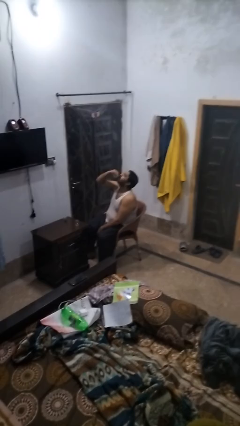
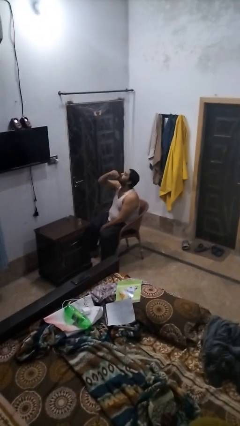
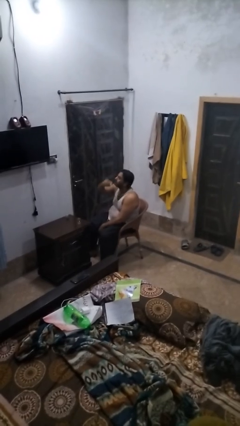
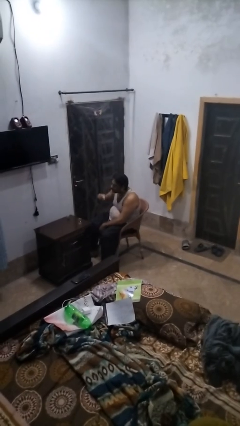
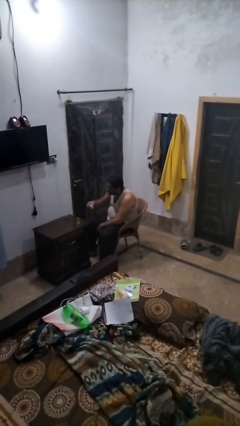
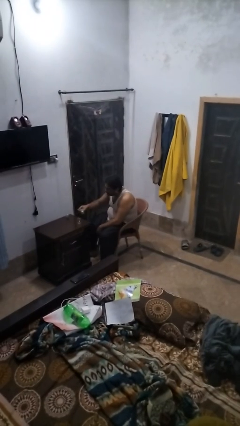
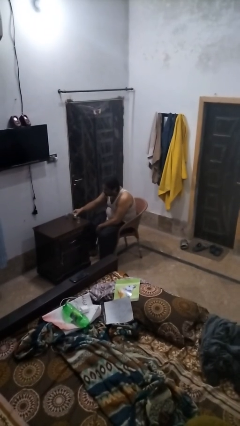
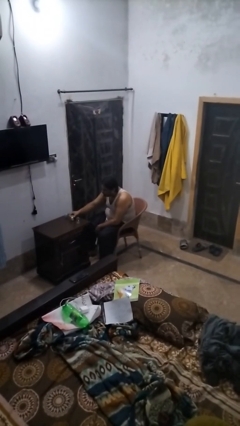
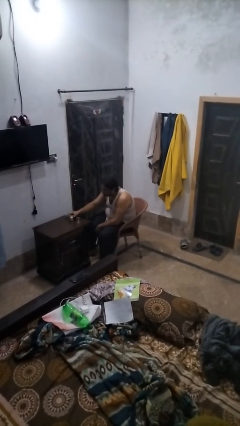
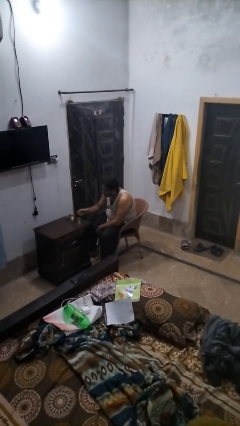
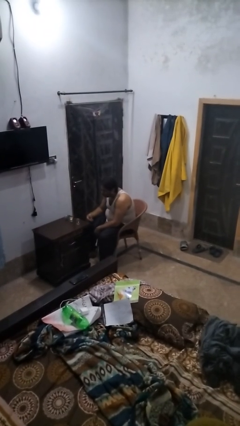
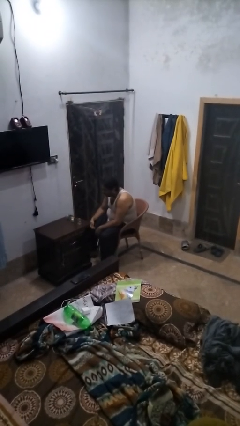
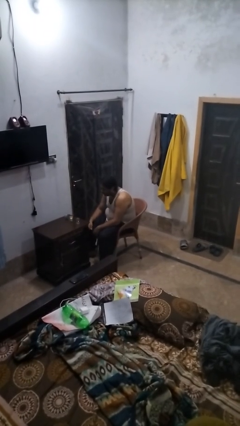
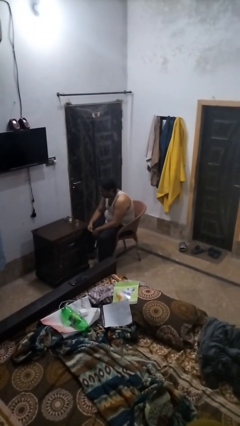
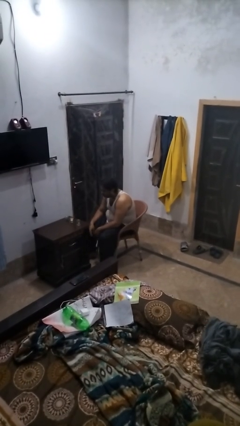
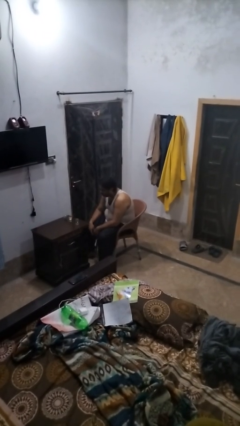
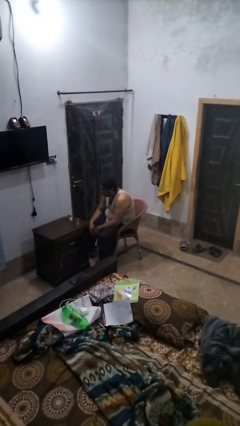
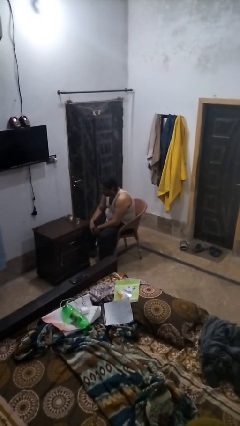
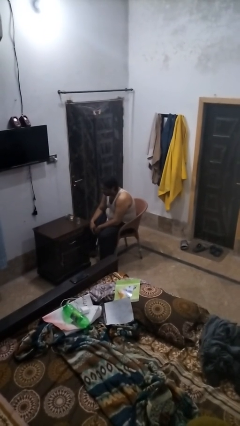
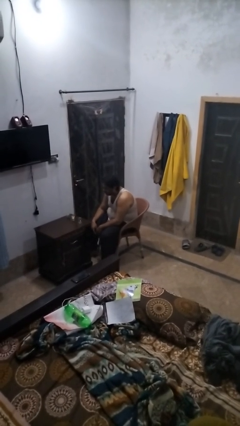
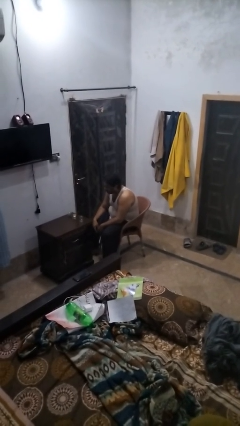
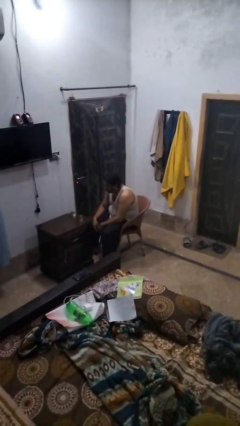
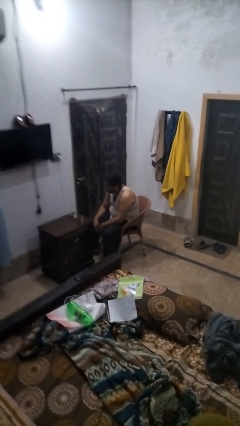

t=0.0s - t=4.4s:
person puts down object on table

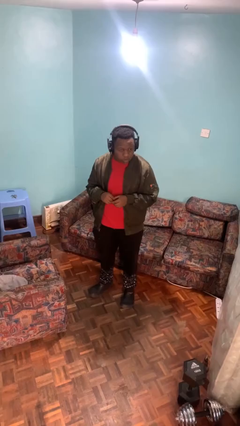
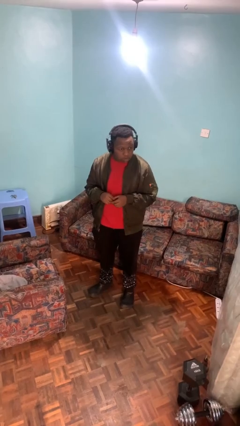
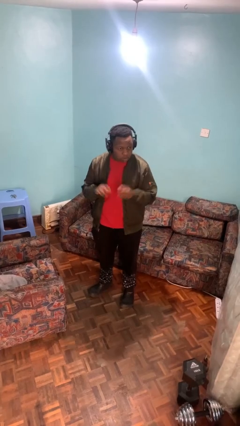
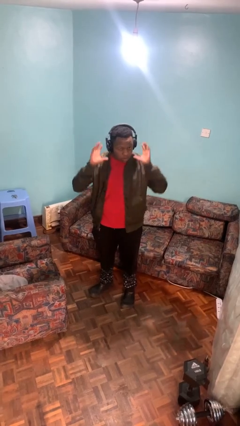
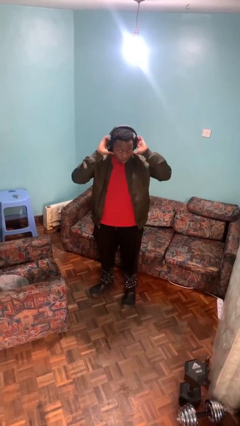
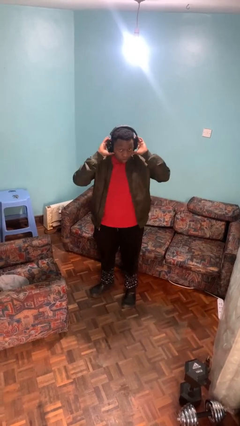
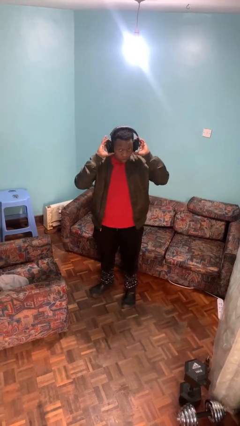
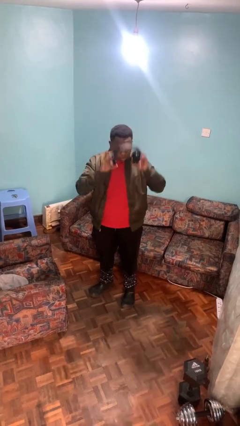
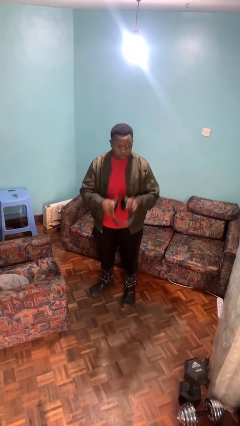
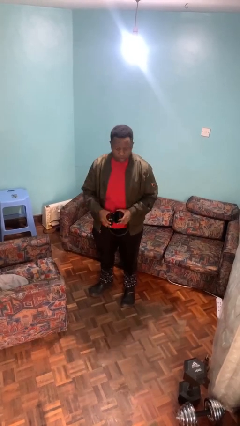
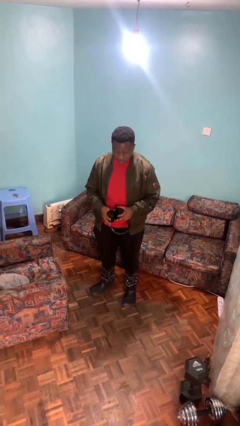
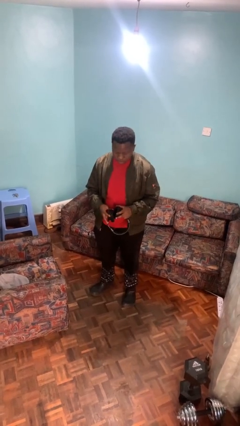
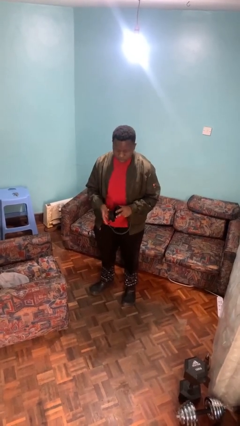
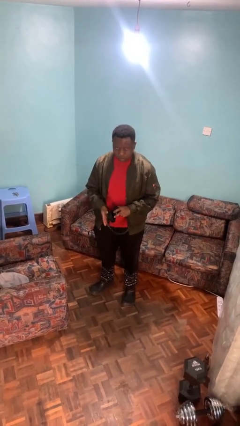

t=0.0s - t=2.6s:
person takes off headphones

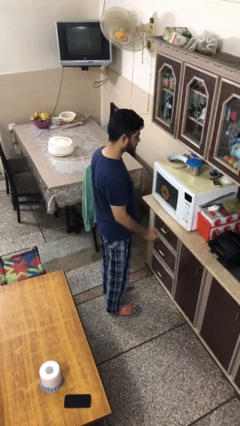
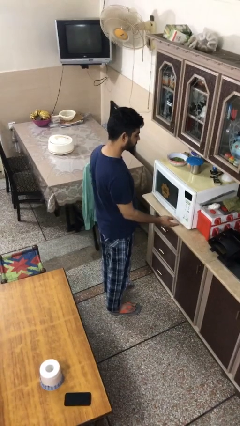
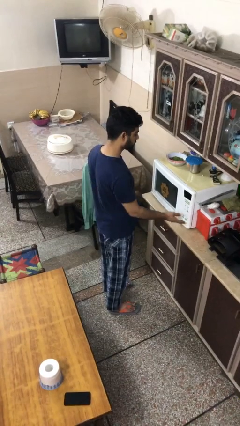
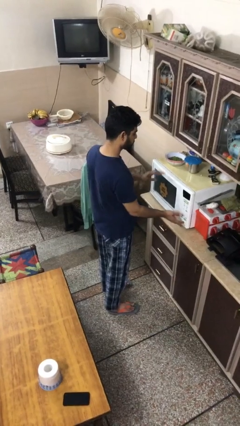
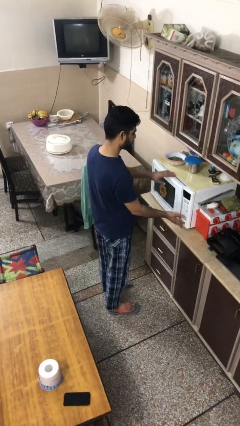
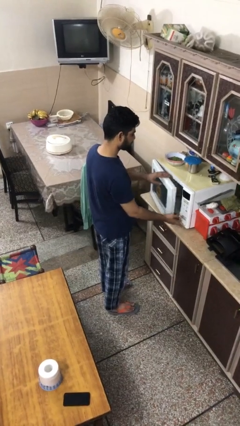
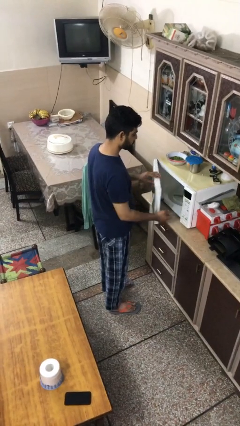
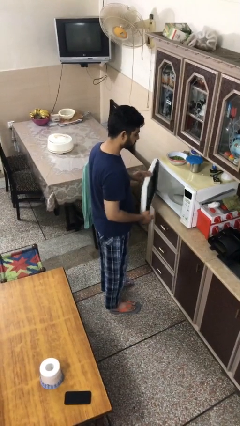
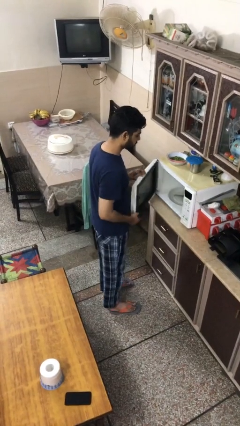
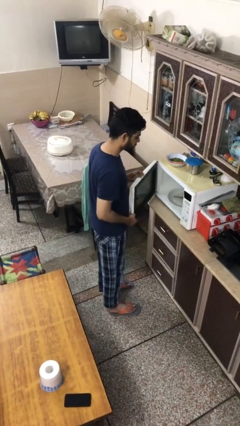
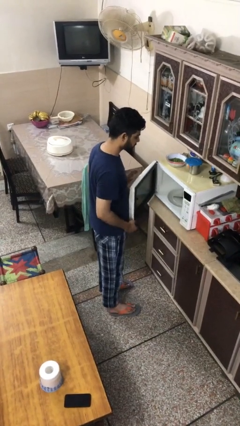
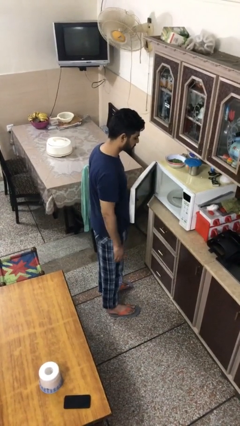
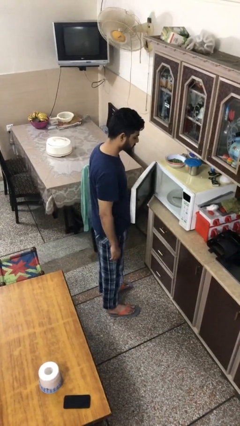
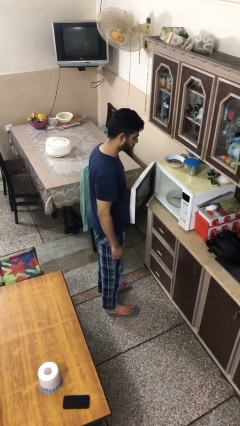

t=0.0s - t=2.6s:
person opens oven door

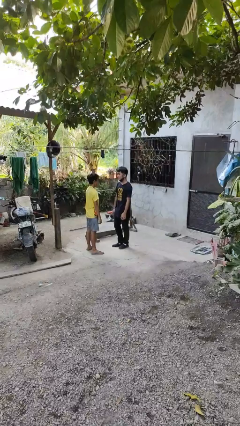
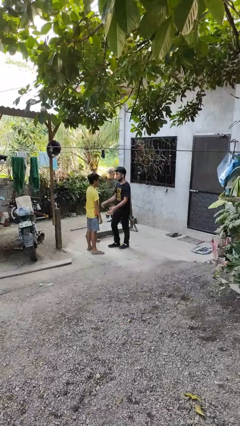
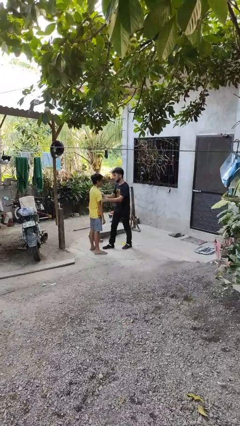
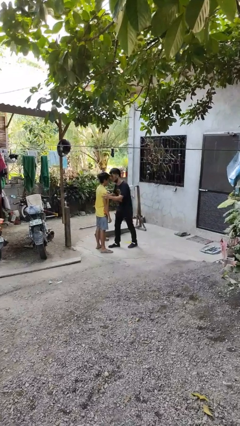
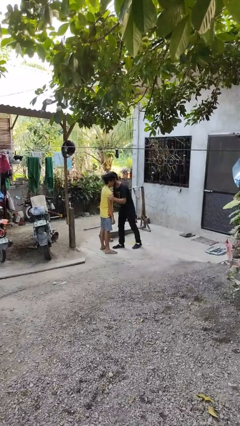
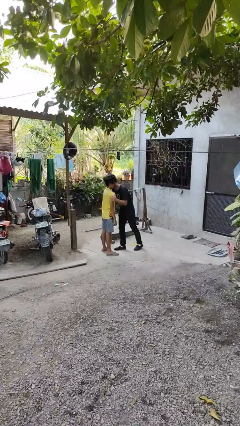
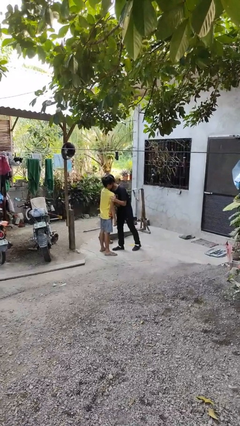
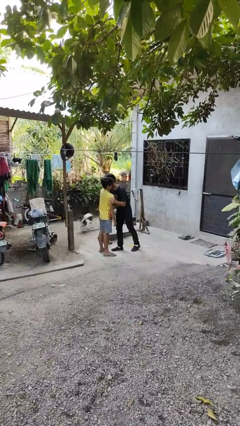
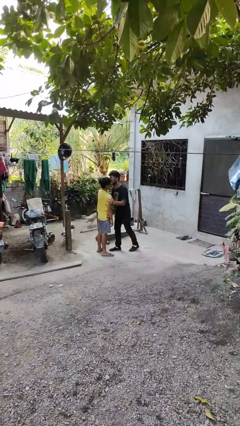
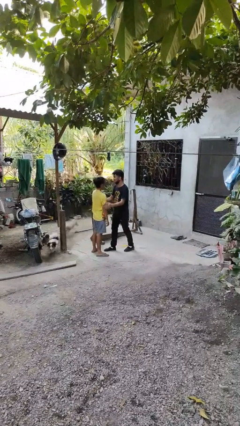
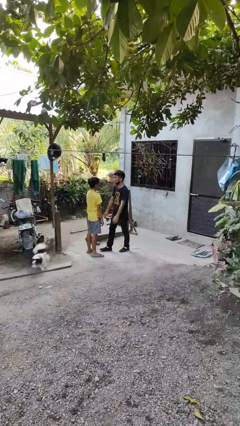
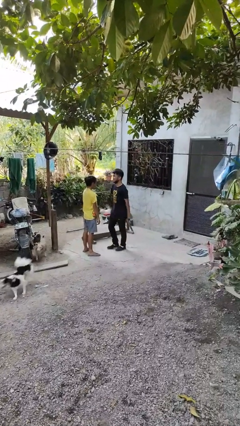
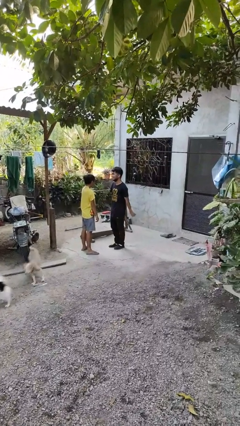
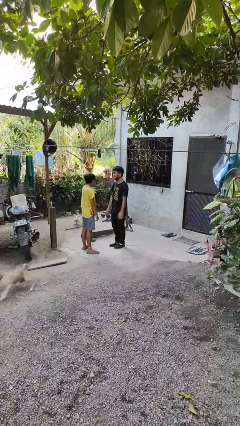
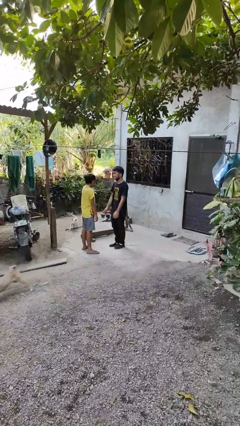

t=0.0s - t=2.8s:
person kisses cheek of person

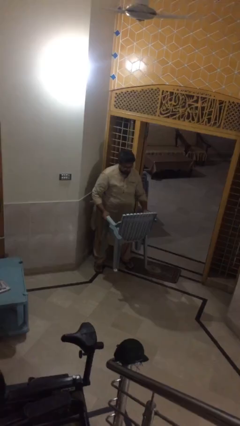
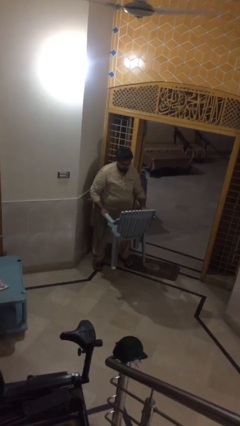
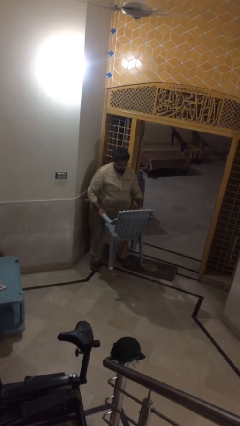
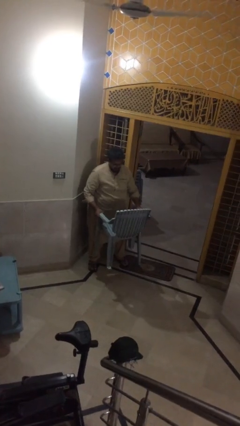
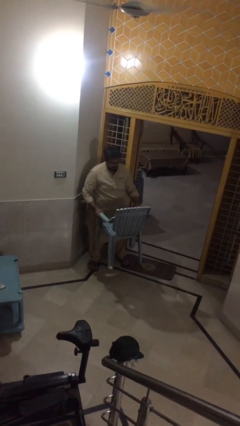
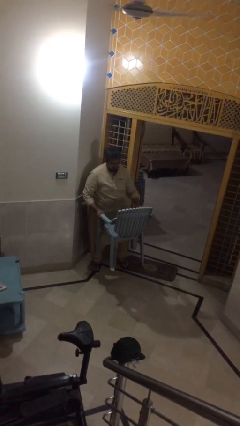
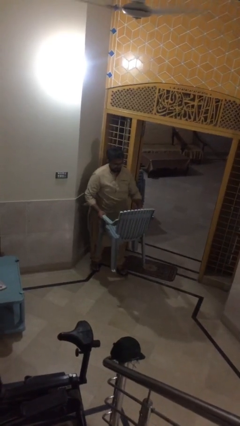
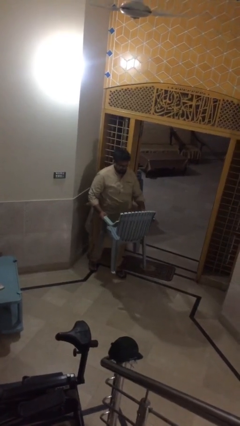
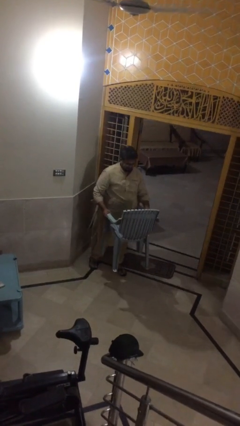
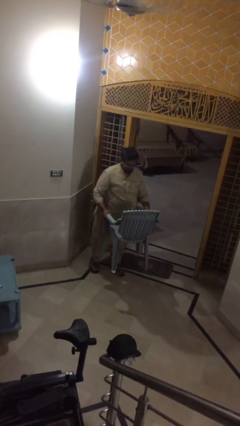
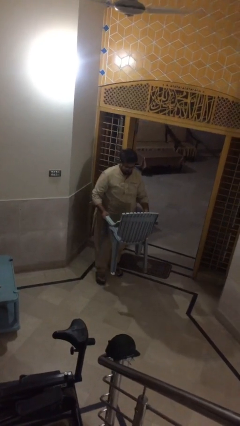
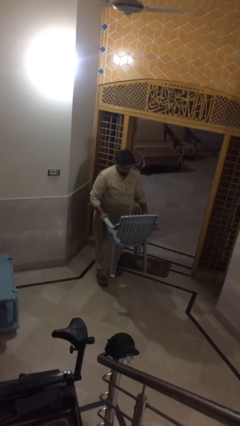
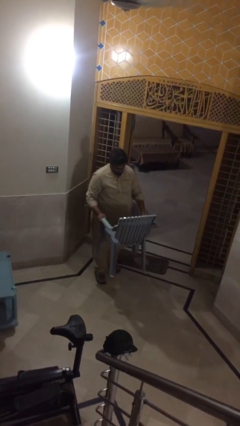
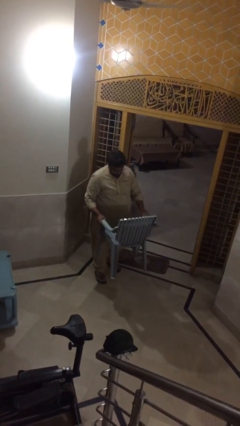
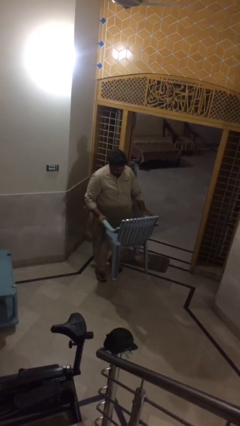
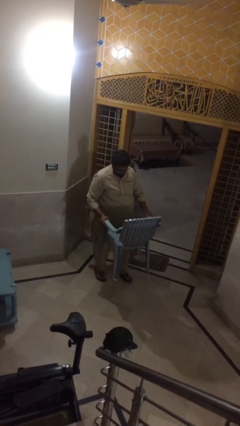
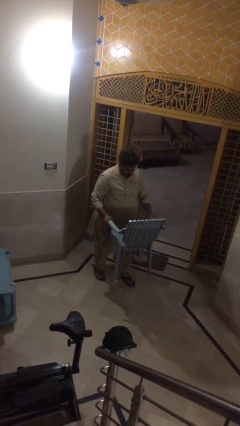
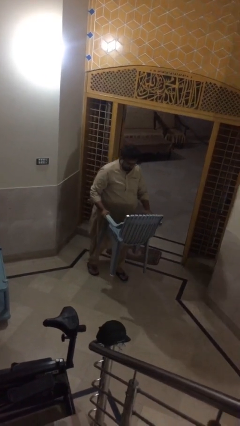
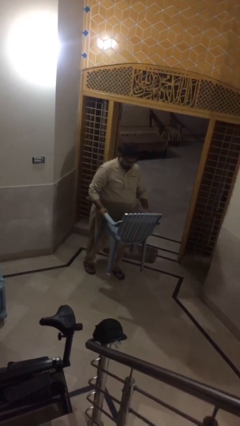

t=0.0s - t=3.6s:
person carries heavy object

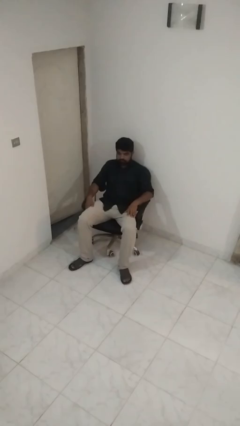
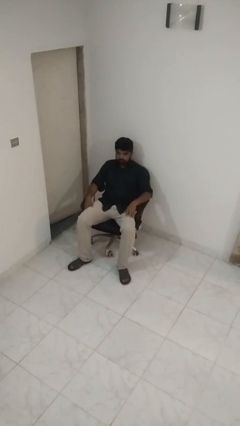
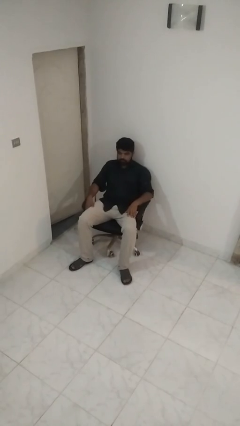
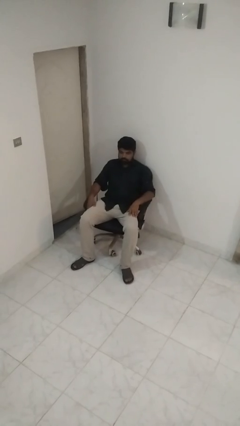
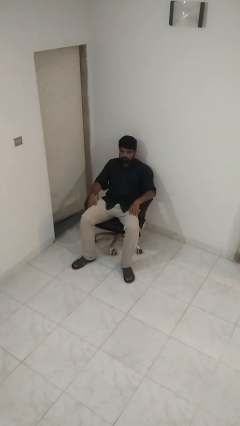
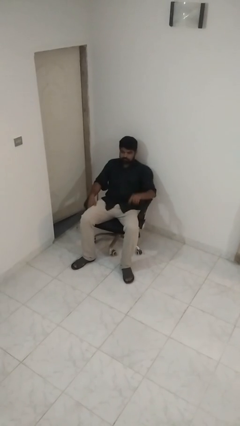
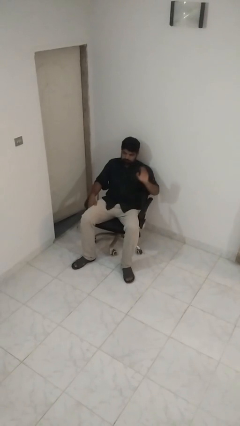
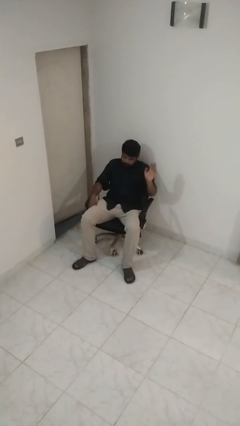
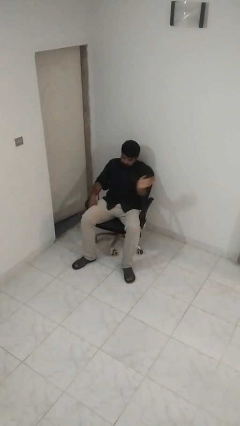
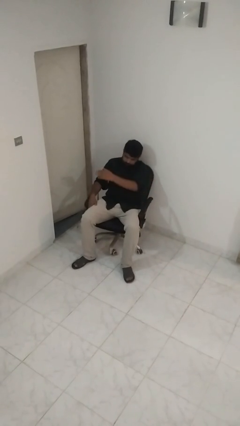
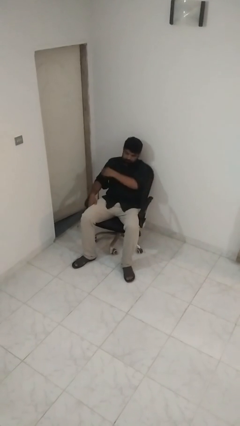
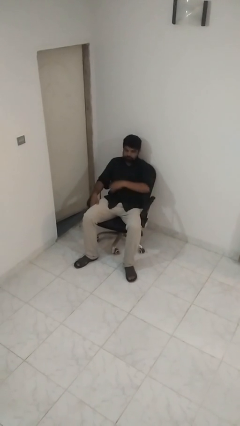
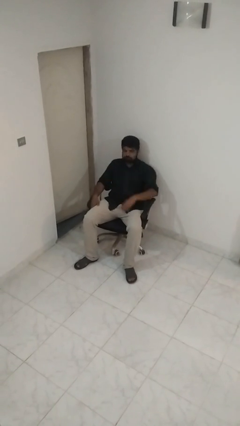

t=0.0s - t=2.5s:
person gestures swipe right
